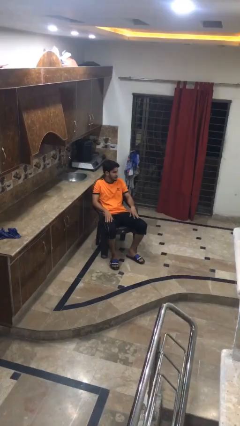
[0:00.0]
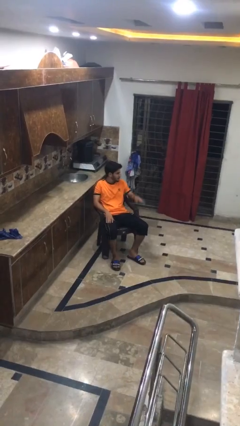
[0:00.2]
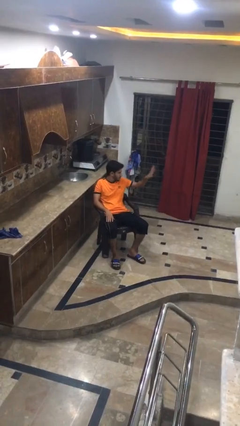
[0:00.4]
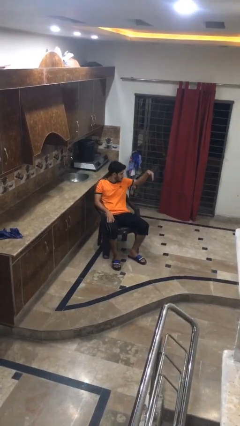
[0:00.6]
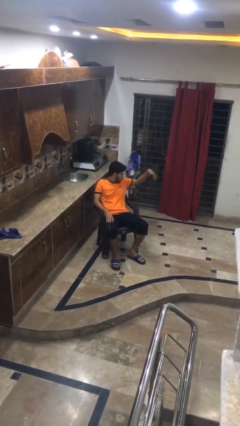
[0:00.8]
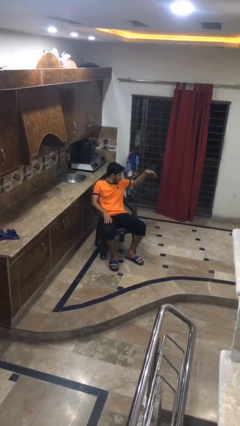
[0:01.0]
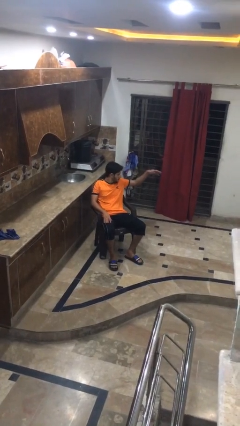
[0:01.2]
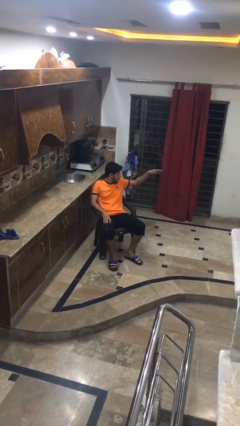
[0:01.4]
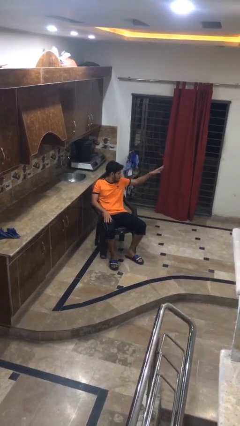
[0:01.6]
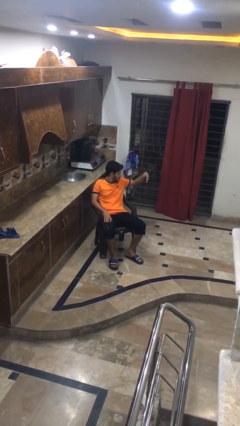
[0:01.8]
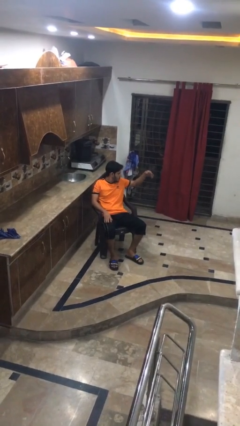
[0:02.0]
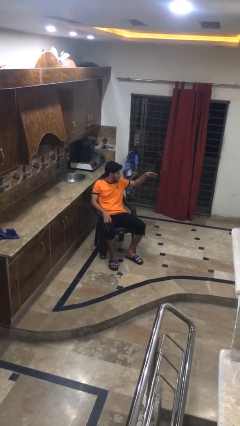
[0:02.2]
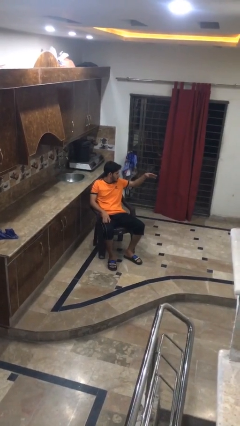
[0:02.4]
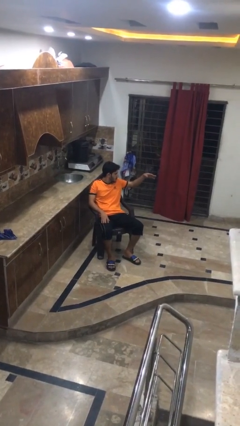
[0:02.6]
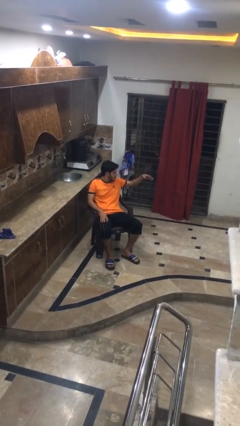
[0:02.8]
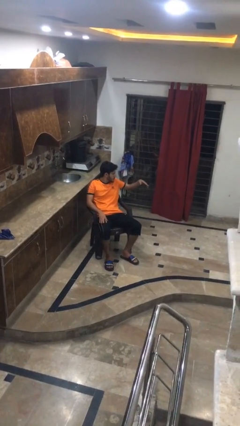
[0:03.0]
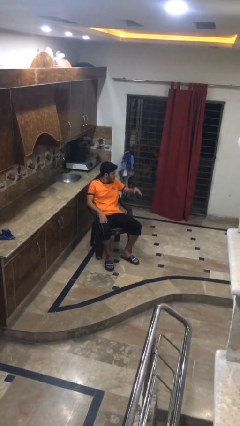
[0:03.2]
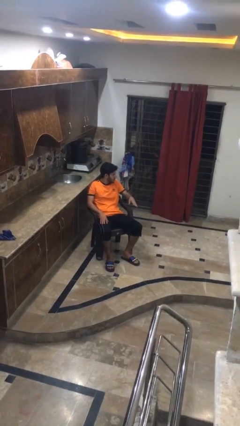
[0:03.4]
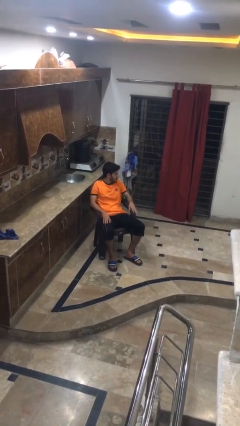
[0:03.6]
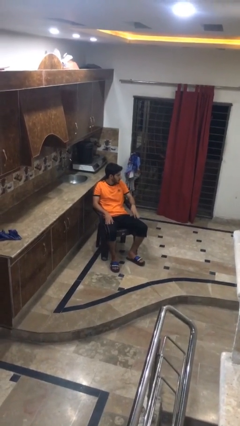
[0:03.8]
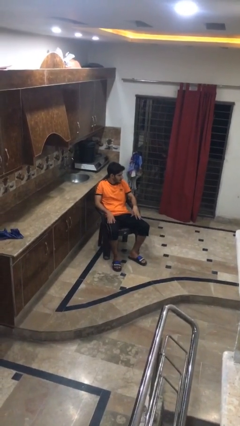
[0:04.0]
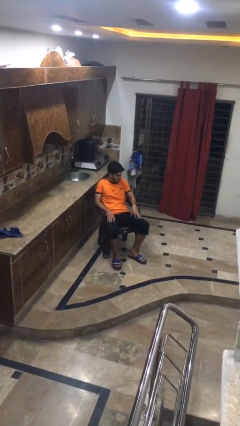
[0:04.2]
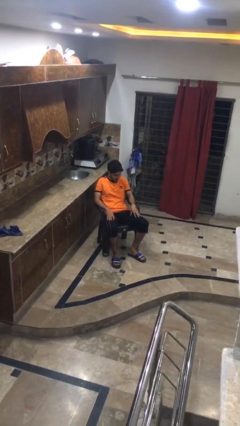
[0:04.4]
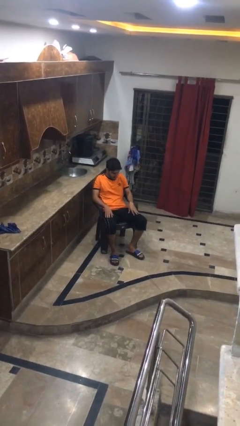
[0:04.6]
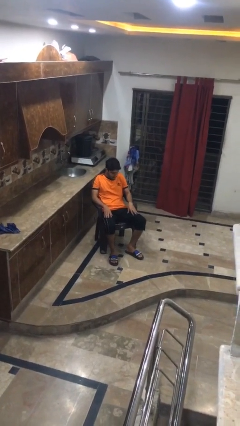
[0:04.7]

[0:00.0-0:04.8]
person gestures come here

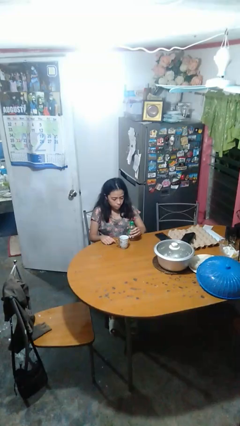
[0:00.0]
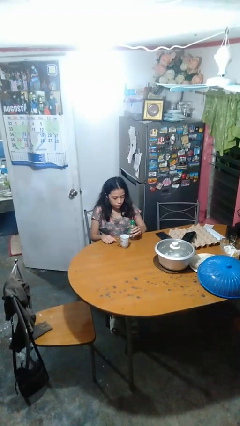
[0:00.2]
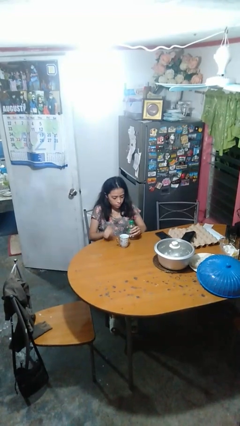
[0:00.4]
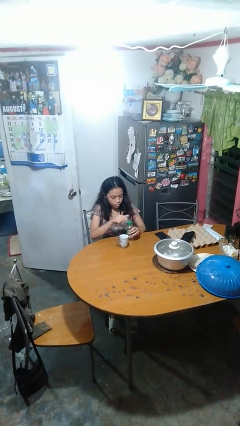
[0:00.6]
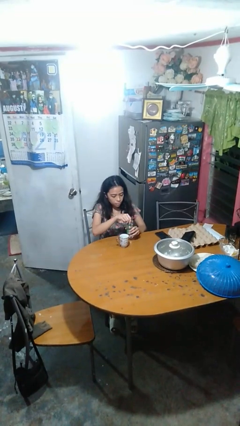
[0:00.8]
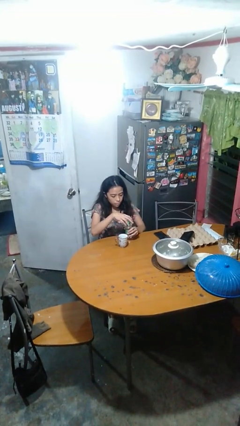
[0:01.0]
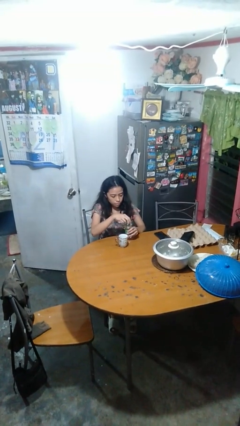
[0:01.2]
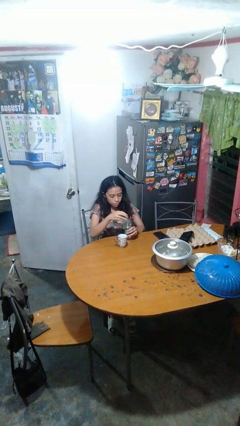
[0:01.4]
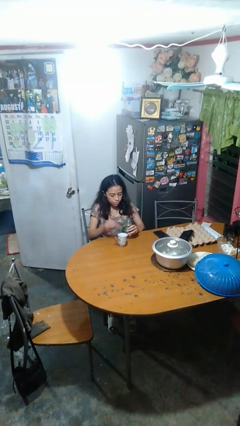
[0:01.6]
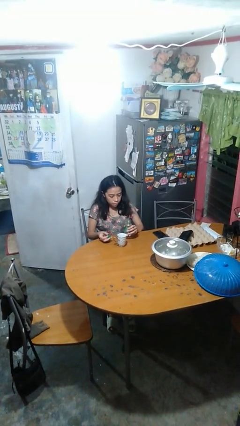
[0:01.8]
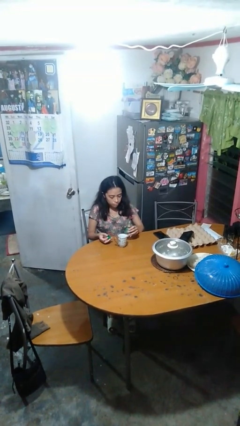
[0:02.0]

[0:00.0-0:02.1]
person unscrews lid from bottle

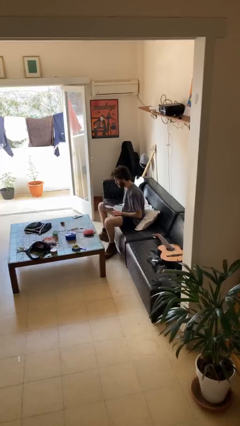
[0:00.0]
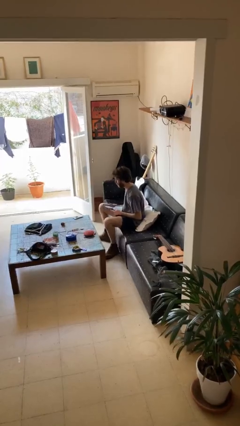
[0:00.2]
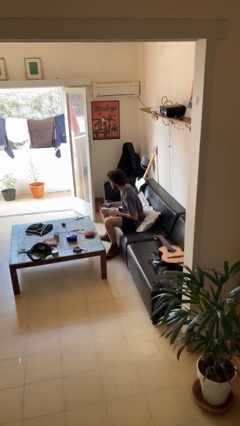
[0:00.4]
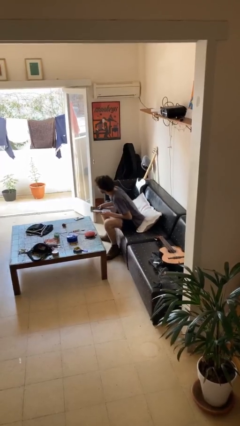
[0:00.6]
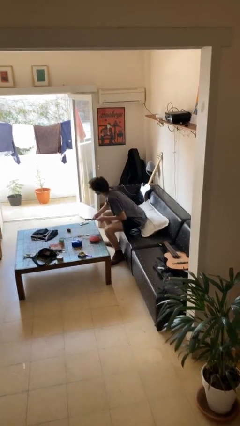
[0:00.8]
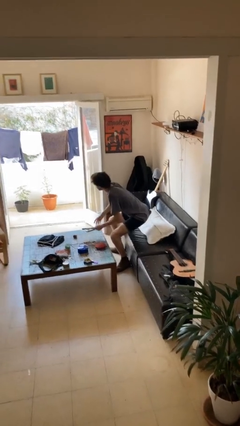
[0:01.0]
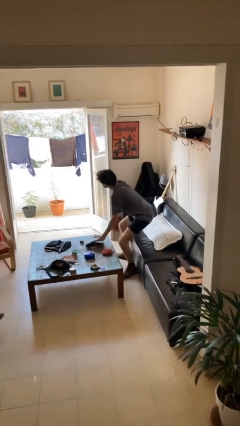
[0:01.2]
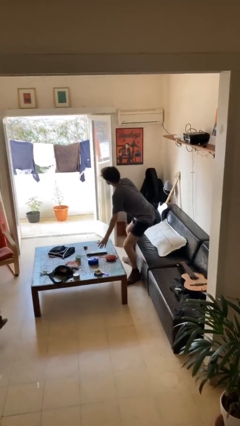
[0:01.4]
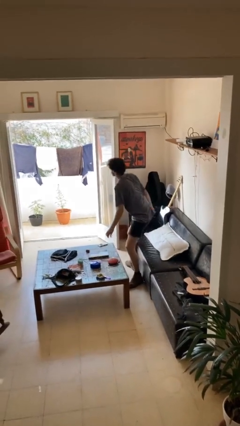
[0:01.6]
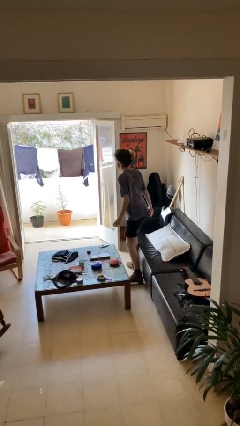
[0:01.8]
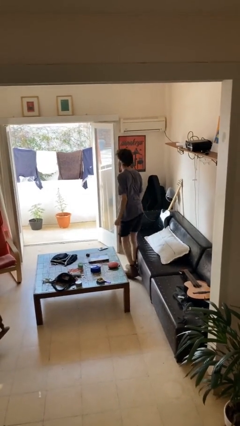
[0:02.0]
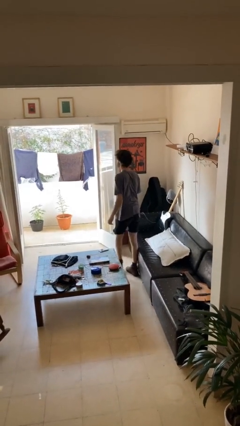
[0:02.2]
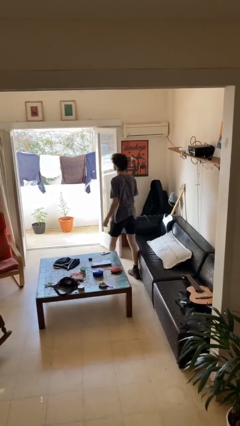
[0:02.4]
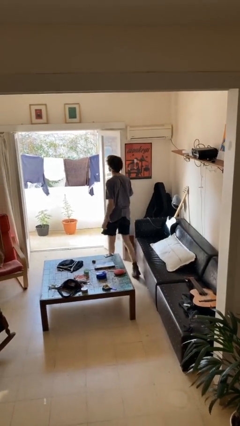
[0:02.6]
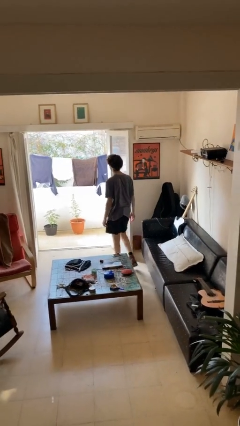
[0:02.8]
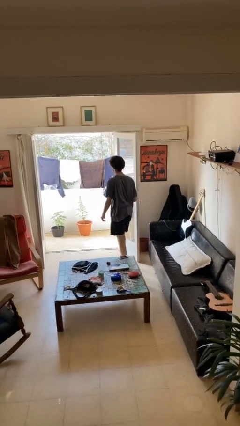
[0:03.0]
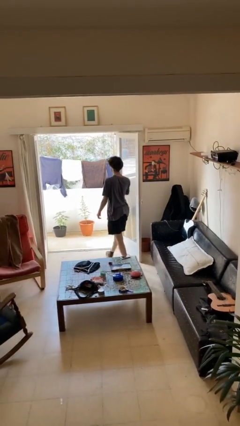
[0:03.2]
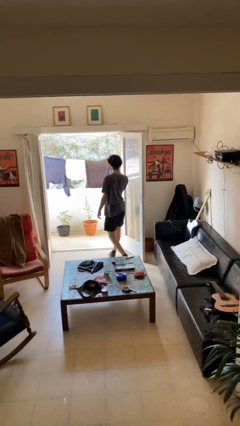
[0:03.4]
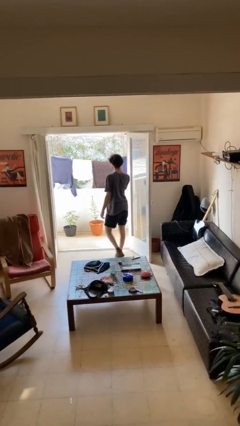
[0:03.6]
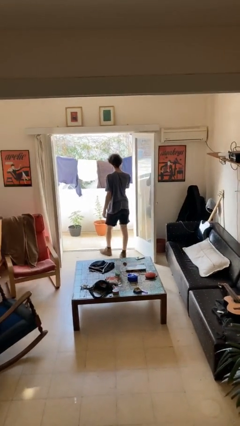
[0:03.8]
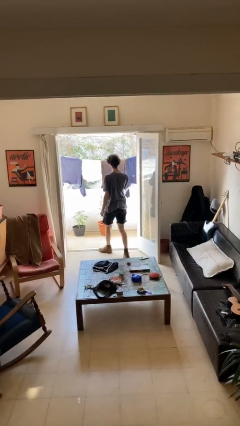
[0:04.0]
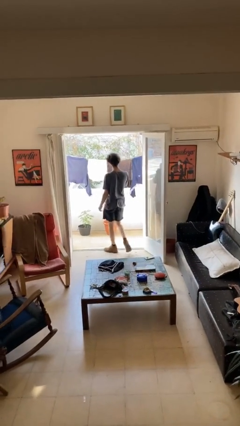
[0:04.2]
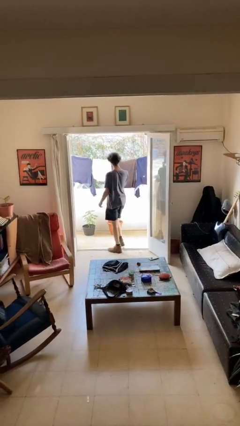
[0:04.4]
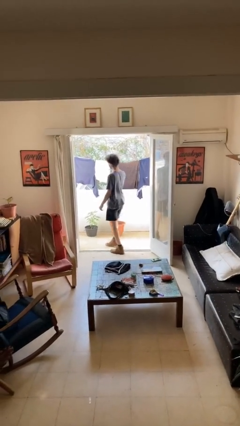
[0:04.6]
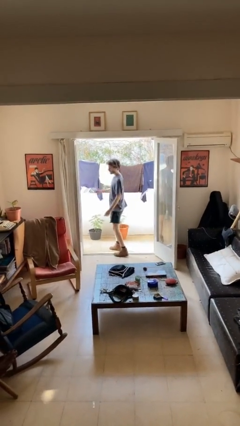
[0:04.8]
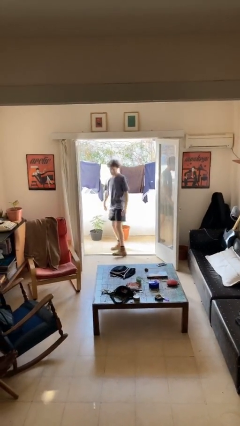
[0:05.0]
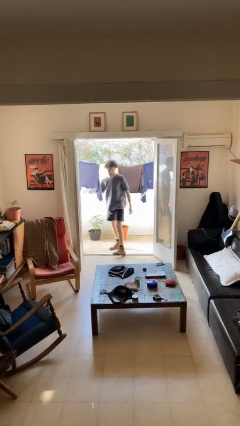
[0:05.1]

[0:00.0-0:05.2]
person stands up

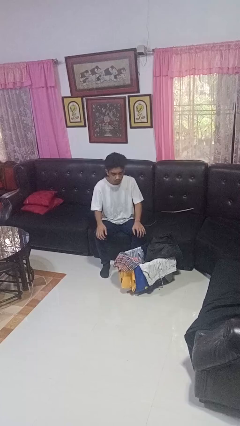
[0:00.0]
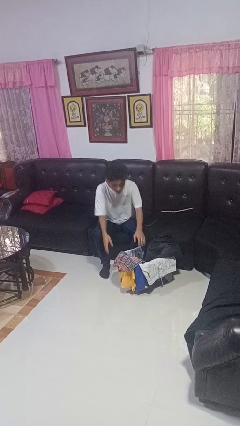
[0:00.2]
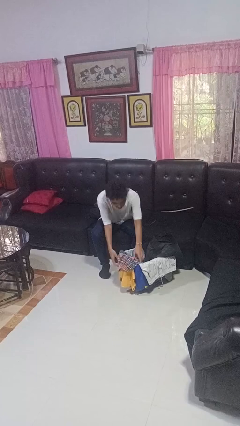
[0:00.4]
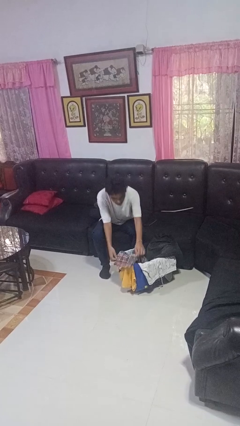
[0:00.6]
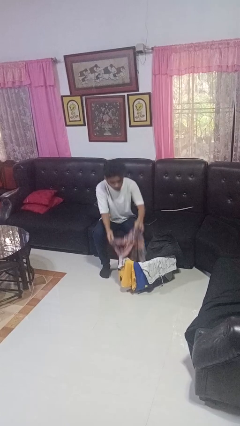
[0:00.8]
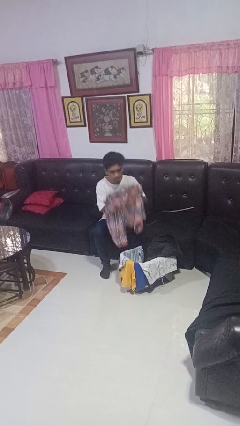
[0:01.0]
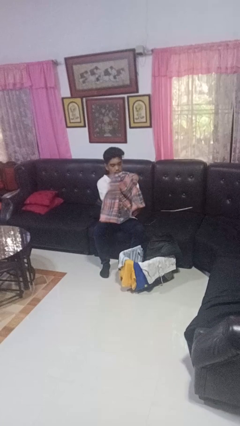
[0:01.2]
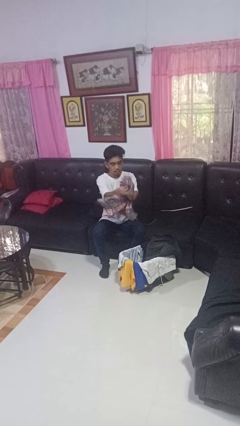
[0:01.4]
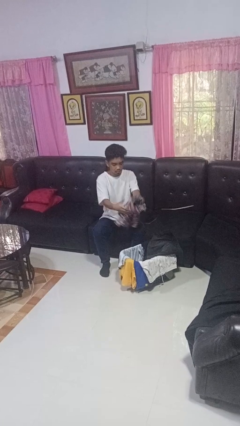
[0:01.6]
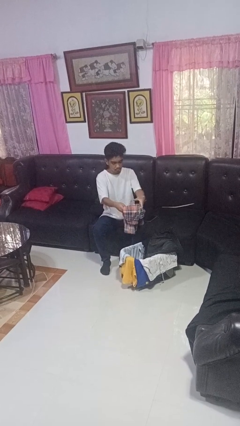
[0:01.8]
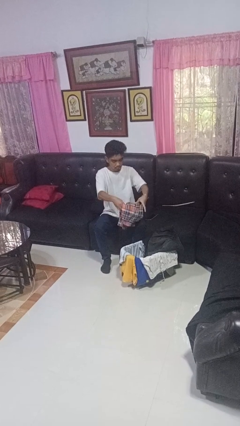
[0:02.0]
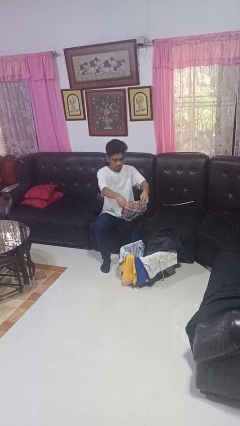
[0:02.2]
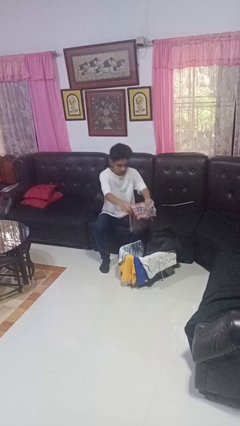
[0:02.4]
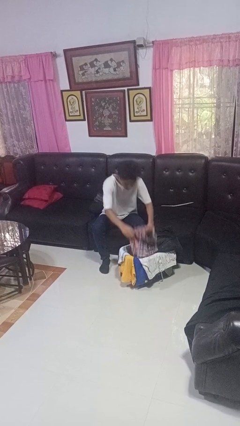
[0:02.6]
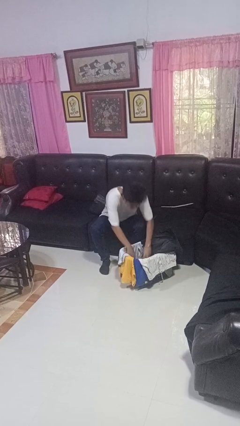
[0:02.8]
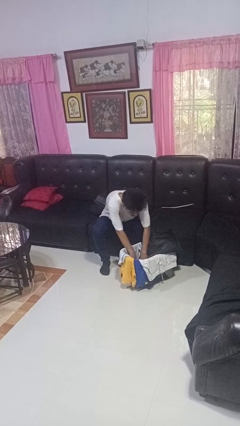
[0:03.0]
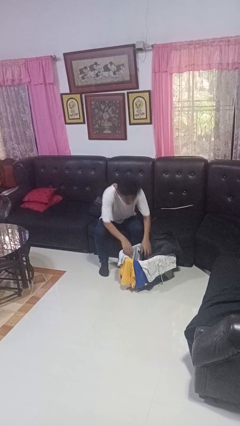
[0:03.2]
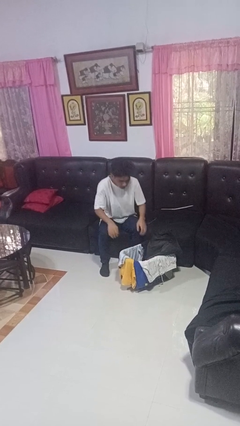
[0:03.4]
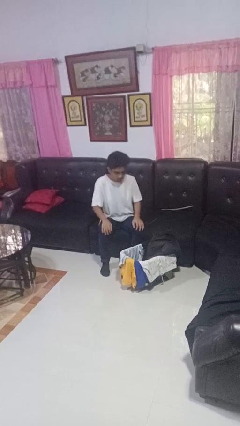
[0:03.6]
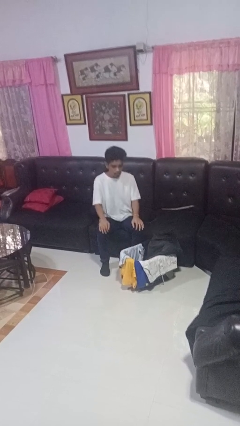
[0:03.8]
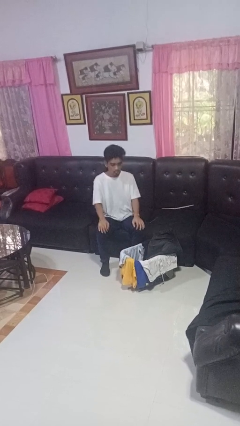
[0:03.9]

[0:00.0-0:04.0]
person folds pants

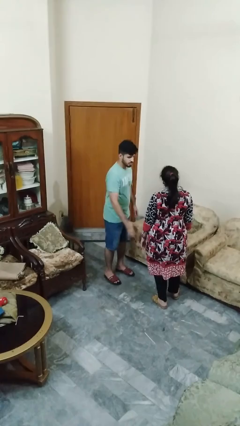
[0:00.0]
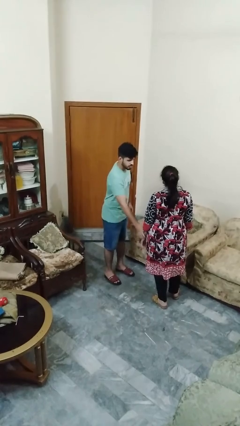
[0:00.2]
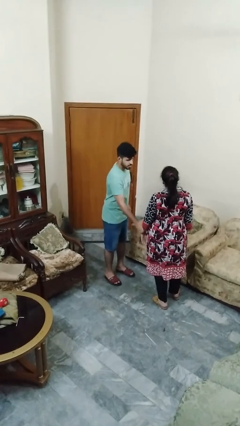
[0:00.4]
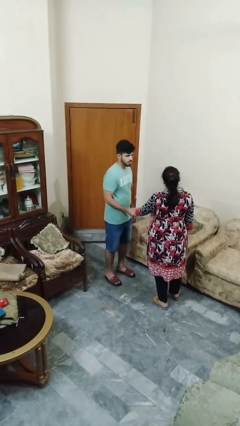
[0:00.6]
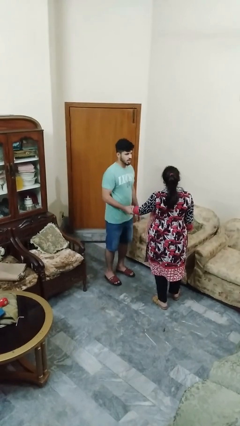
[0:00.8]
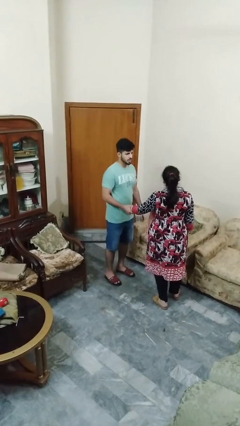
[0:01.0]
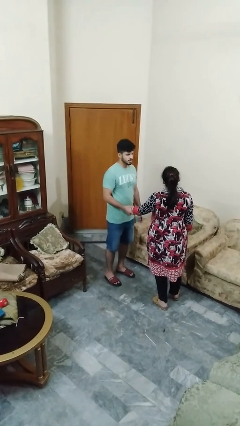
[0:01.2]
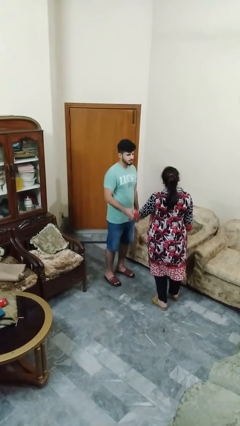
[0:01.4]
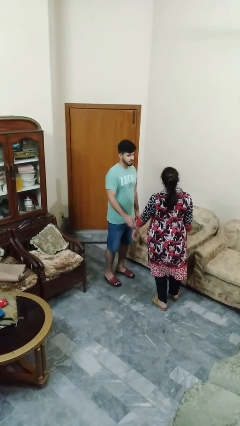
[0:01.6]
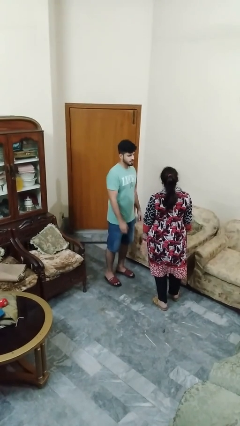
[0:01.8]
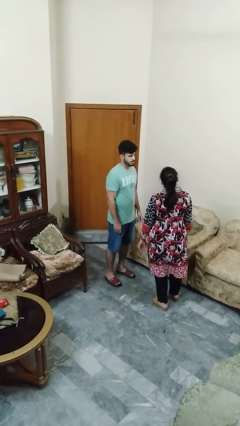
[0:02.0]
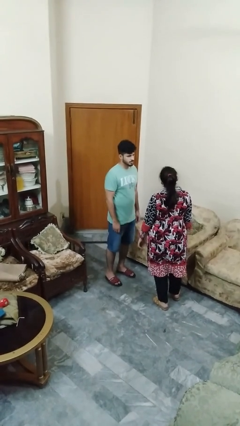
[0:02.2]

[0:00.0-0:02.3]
person grabs person by forearm
